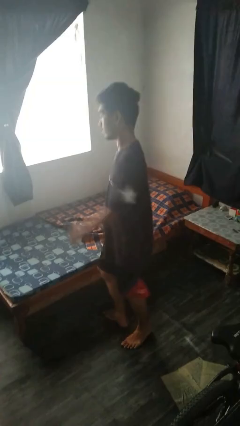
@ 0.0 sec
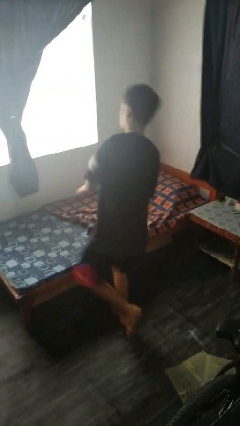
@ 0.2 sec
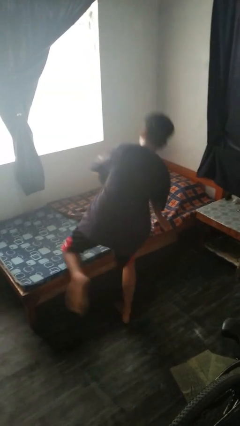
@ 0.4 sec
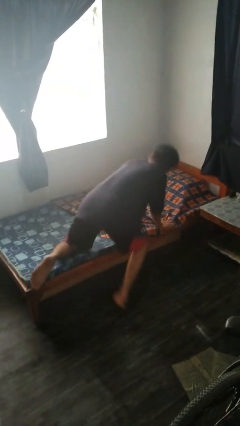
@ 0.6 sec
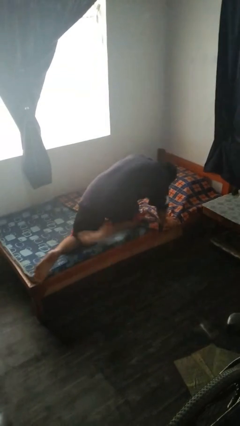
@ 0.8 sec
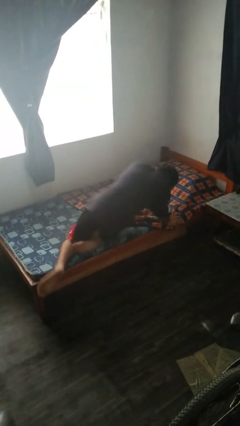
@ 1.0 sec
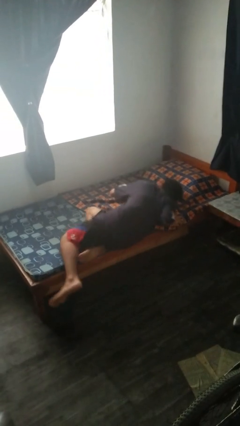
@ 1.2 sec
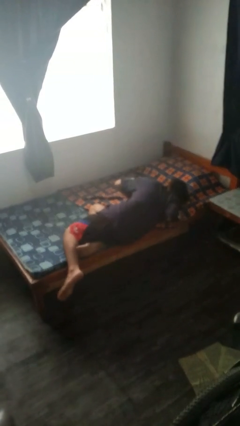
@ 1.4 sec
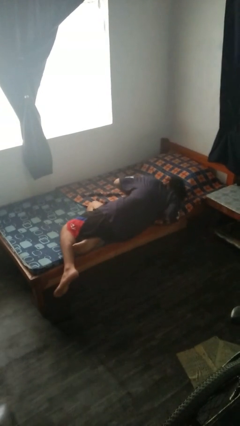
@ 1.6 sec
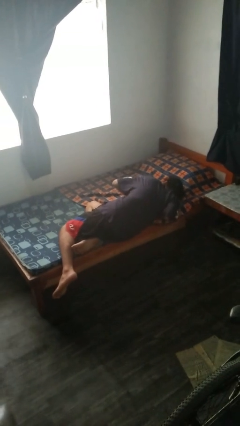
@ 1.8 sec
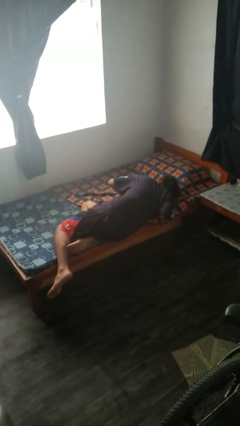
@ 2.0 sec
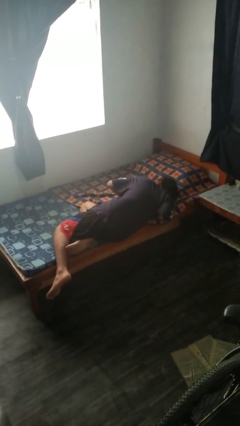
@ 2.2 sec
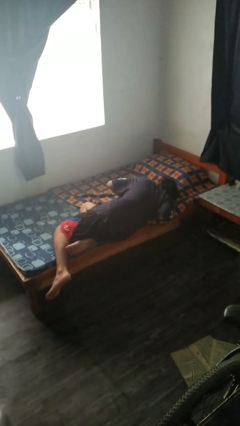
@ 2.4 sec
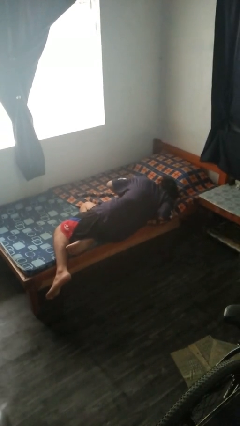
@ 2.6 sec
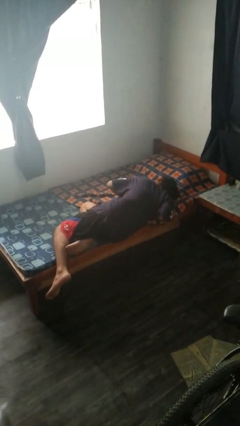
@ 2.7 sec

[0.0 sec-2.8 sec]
person lies down on bed

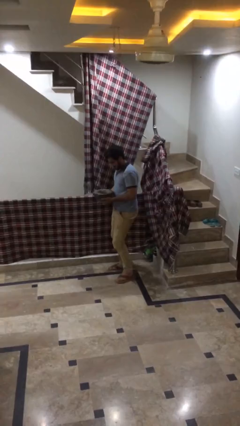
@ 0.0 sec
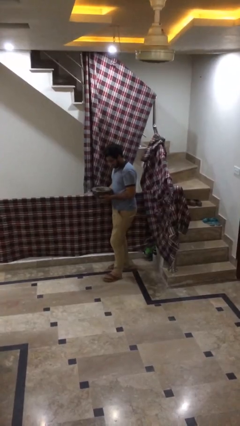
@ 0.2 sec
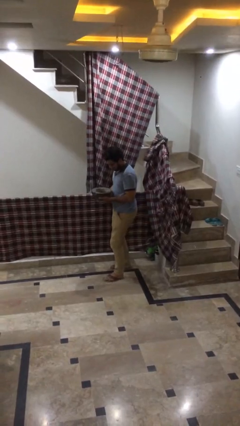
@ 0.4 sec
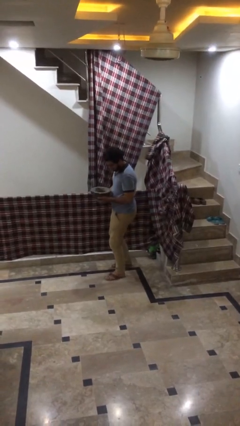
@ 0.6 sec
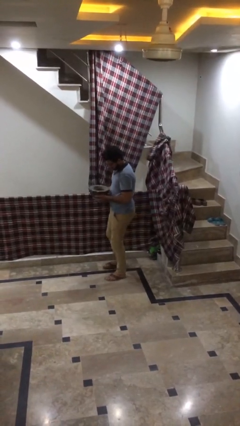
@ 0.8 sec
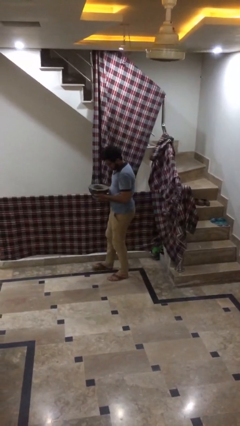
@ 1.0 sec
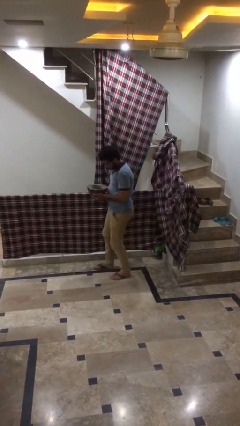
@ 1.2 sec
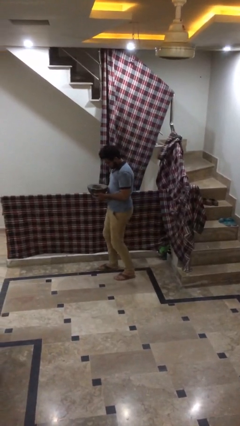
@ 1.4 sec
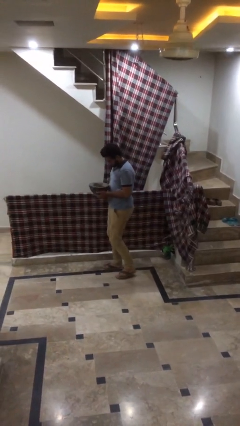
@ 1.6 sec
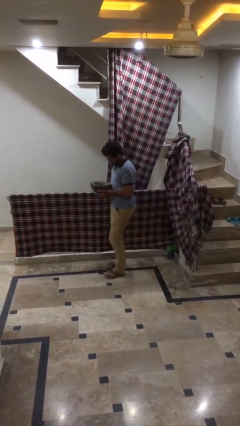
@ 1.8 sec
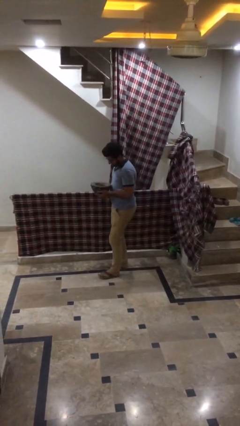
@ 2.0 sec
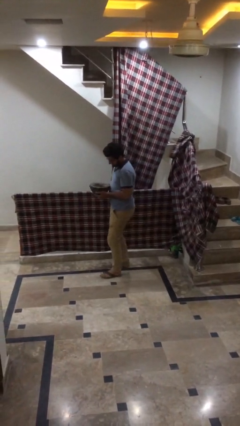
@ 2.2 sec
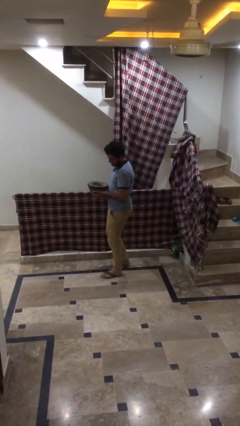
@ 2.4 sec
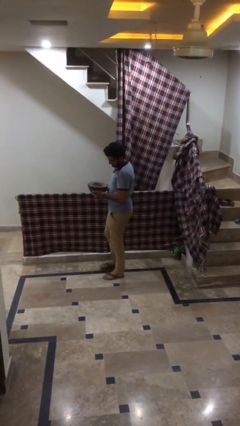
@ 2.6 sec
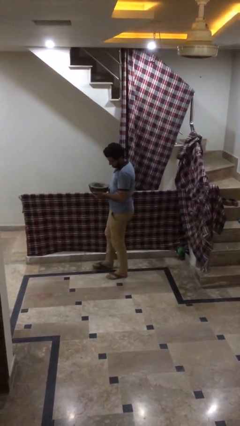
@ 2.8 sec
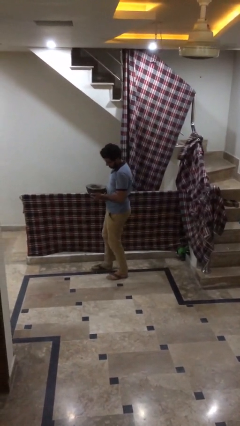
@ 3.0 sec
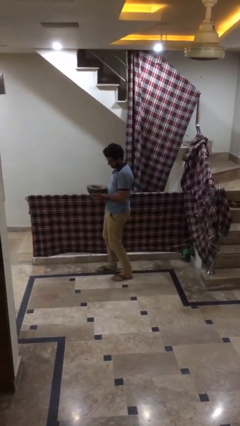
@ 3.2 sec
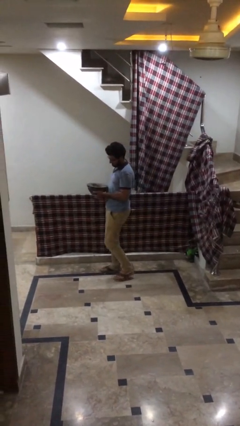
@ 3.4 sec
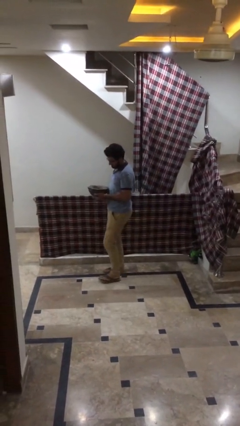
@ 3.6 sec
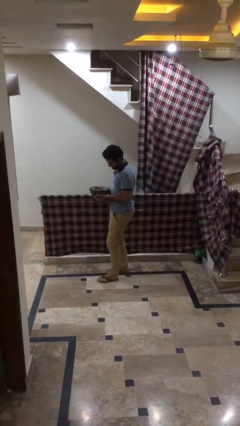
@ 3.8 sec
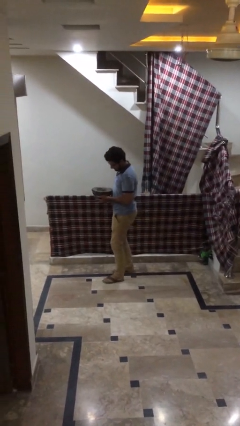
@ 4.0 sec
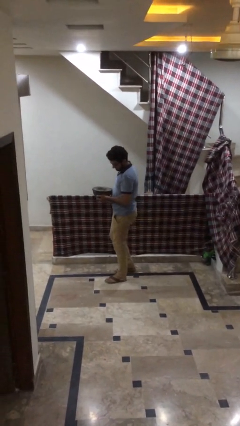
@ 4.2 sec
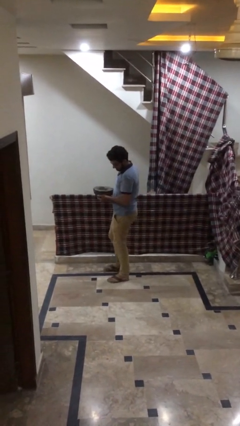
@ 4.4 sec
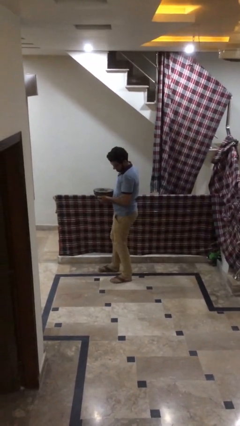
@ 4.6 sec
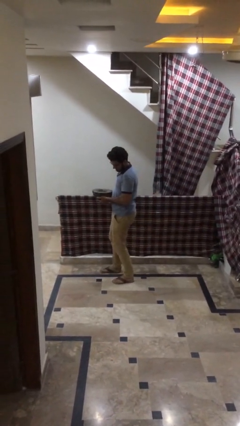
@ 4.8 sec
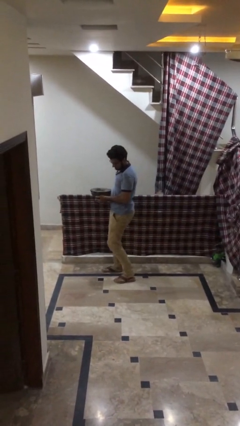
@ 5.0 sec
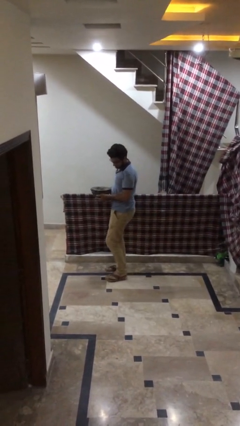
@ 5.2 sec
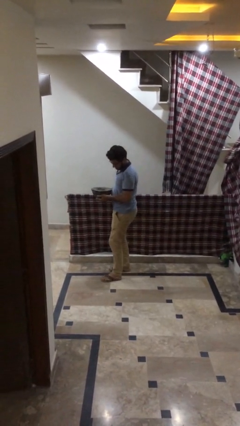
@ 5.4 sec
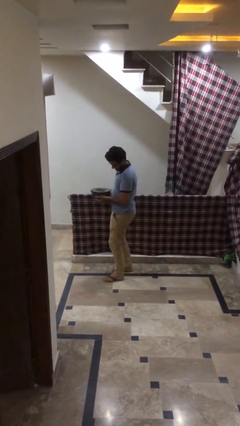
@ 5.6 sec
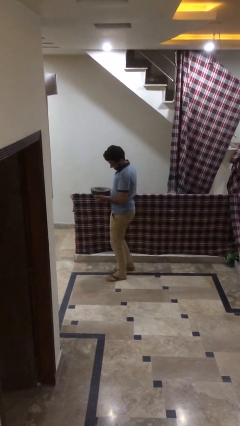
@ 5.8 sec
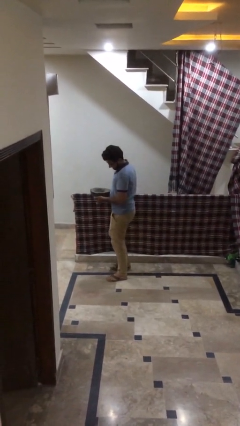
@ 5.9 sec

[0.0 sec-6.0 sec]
person carries heavy object

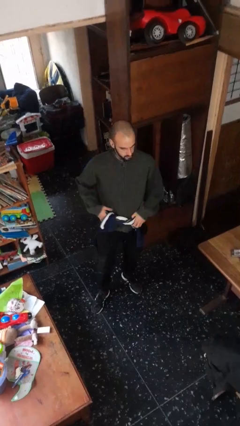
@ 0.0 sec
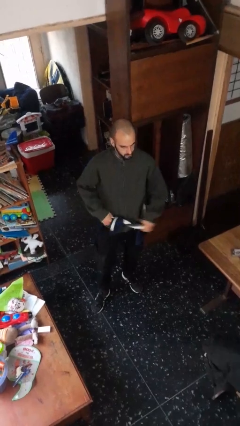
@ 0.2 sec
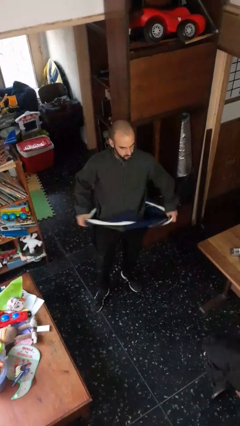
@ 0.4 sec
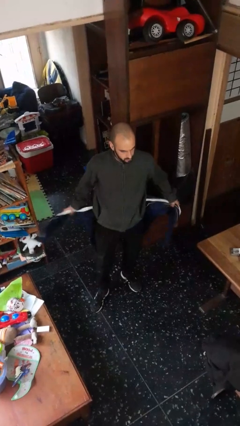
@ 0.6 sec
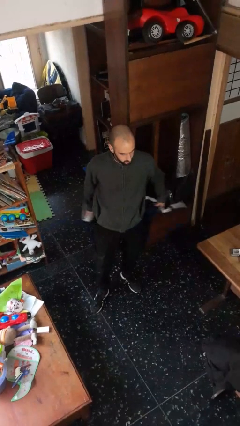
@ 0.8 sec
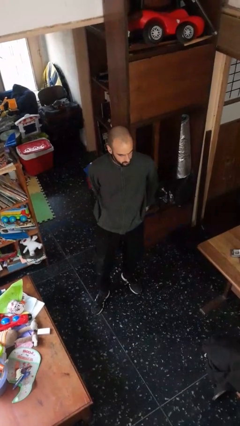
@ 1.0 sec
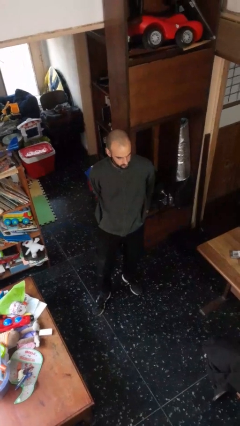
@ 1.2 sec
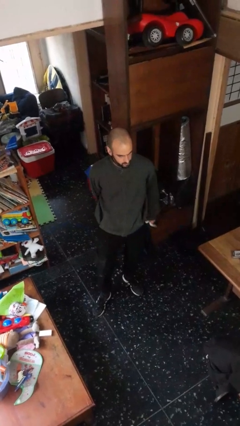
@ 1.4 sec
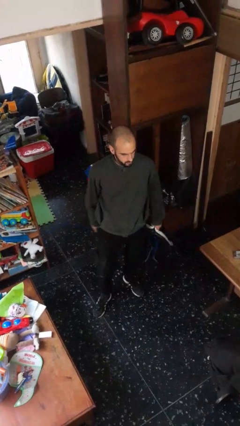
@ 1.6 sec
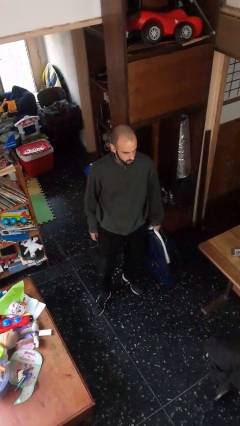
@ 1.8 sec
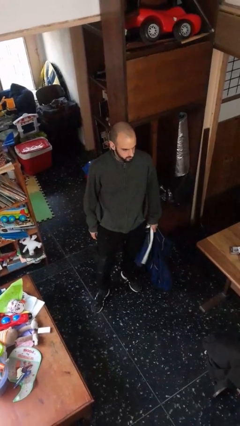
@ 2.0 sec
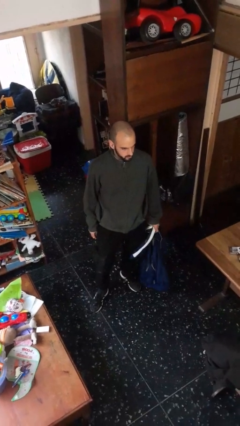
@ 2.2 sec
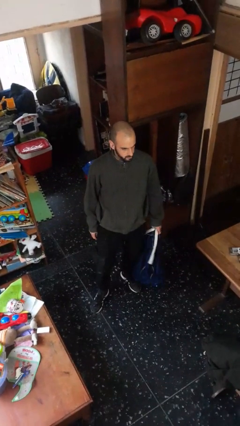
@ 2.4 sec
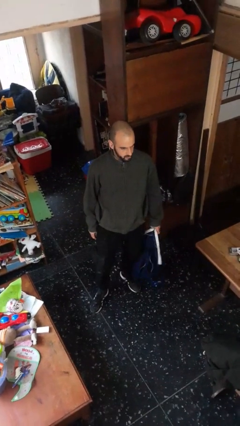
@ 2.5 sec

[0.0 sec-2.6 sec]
person unties jacket around waist

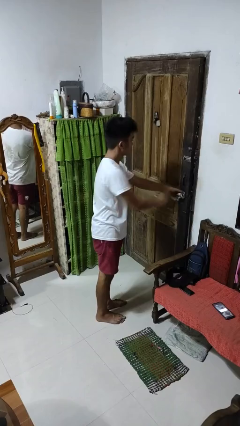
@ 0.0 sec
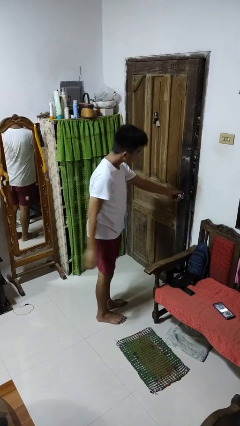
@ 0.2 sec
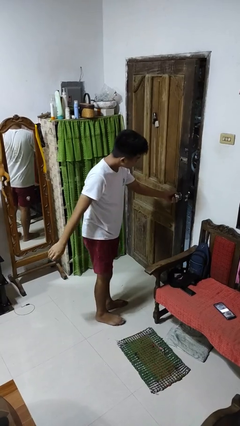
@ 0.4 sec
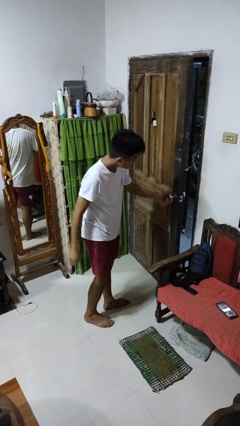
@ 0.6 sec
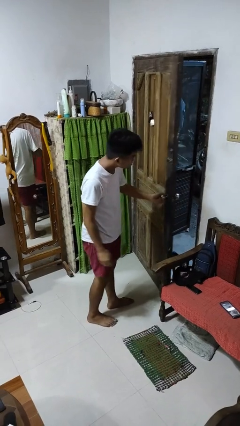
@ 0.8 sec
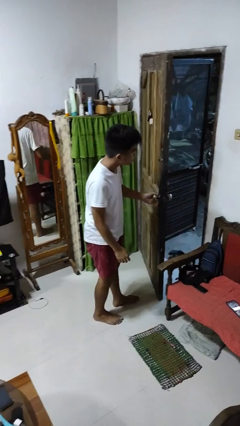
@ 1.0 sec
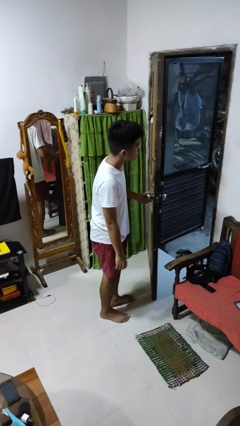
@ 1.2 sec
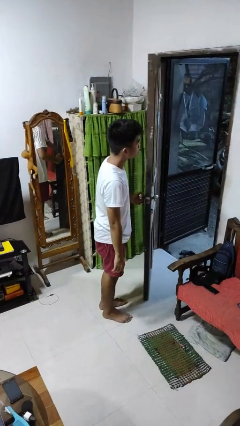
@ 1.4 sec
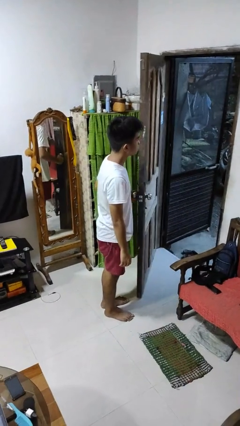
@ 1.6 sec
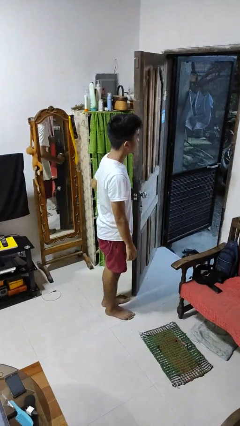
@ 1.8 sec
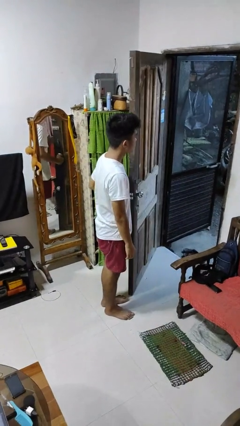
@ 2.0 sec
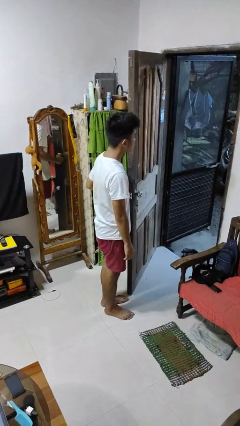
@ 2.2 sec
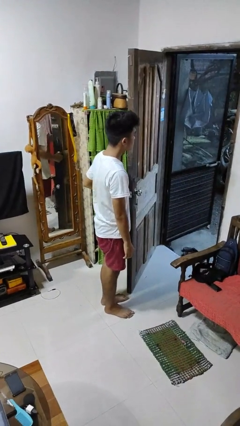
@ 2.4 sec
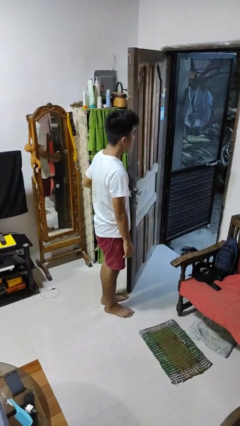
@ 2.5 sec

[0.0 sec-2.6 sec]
person opens facility door

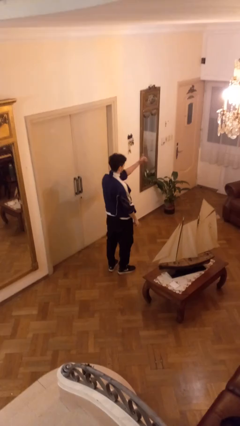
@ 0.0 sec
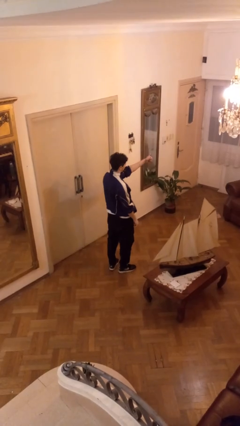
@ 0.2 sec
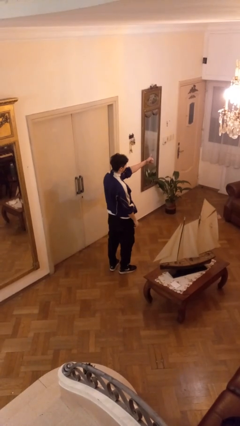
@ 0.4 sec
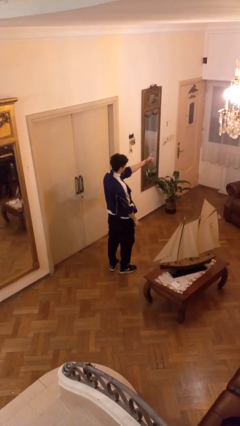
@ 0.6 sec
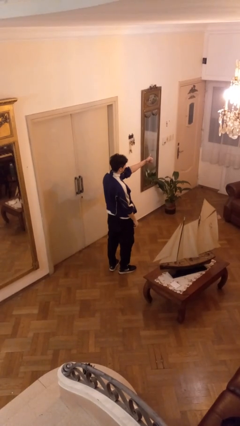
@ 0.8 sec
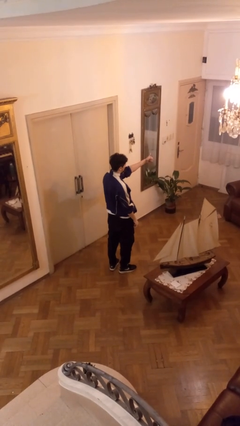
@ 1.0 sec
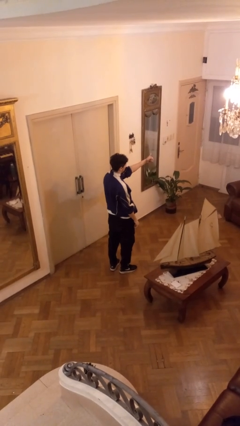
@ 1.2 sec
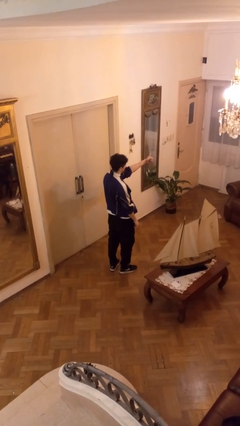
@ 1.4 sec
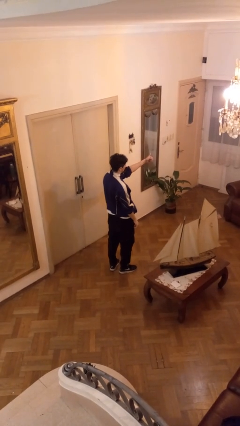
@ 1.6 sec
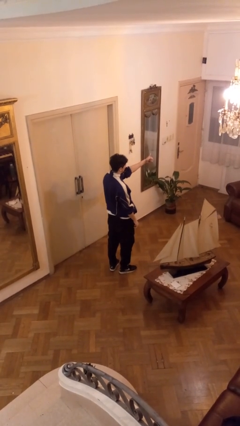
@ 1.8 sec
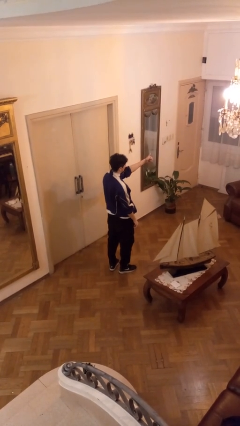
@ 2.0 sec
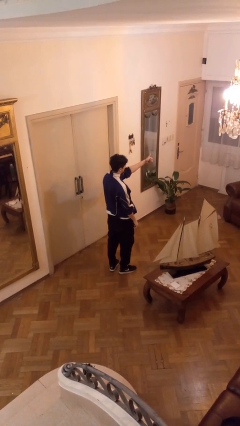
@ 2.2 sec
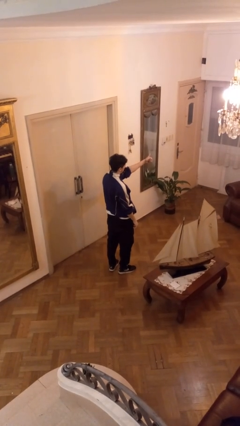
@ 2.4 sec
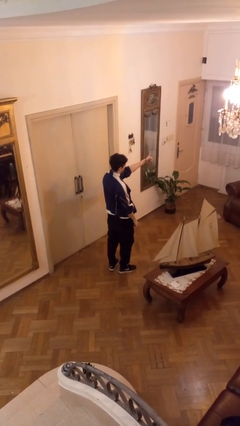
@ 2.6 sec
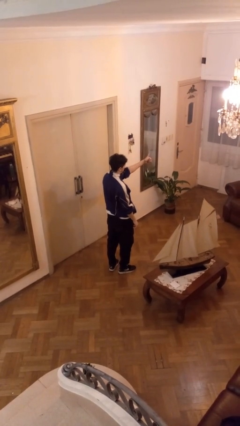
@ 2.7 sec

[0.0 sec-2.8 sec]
person gestures thumbs up

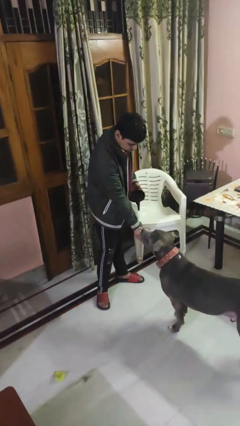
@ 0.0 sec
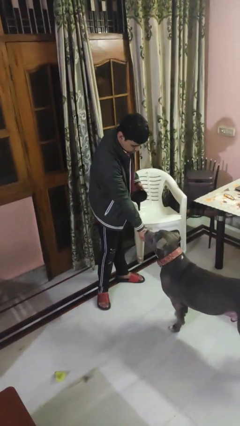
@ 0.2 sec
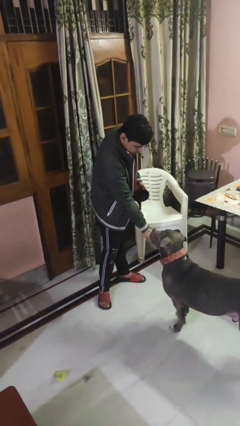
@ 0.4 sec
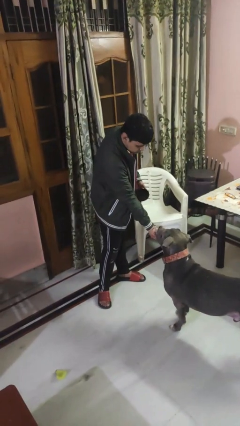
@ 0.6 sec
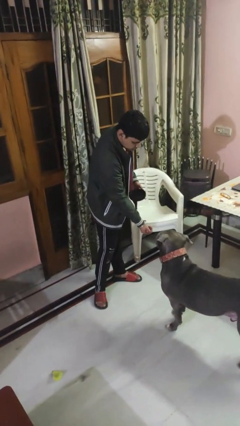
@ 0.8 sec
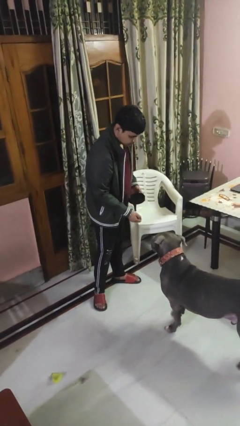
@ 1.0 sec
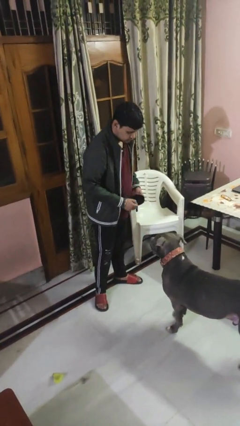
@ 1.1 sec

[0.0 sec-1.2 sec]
person feeds dog
